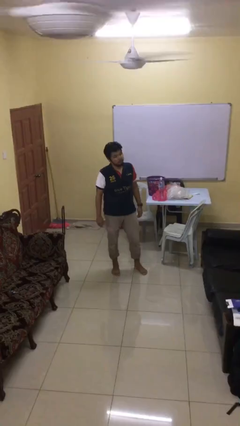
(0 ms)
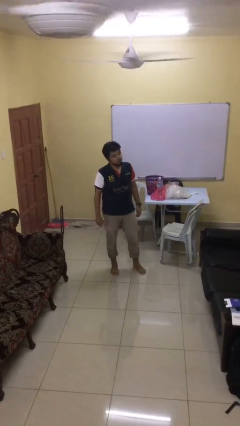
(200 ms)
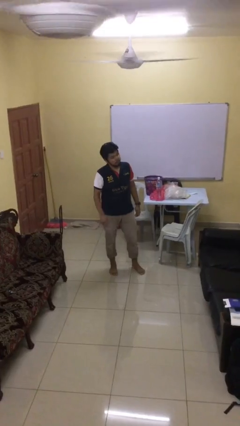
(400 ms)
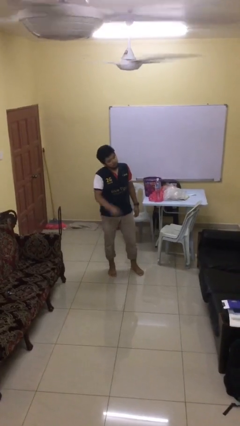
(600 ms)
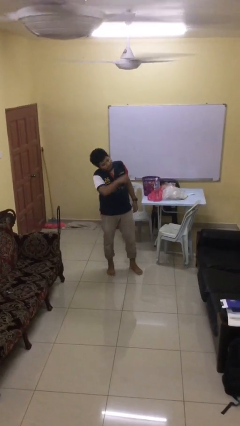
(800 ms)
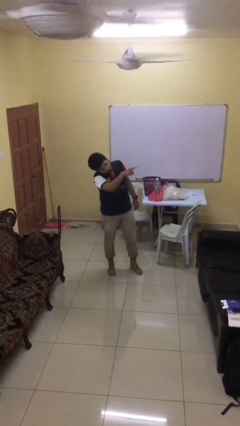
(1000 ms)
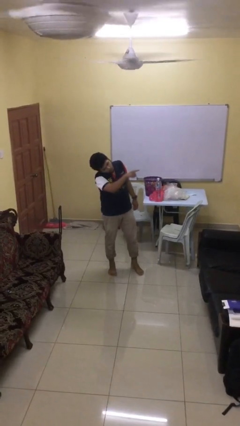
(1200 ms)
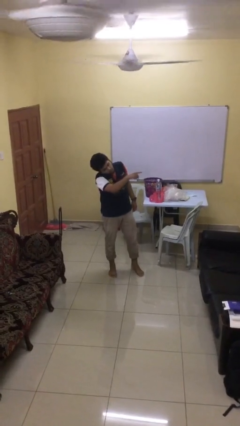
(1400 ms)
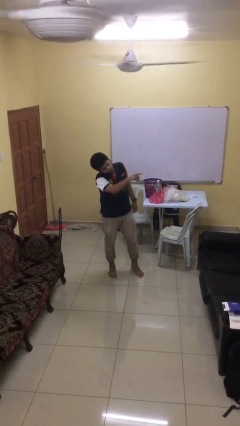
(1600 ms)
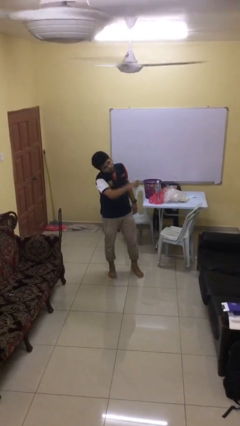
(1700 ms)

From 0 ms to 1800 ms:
person points at person

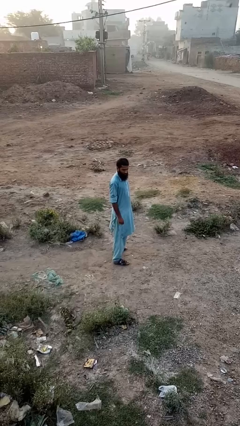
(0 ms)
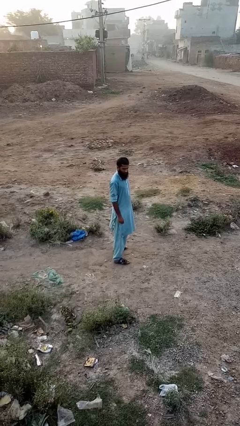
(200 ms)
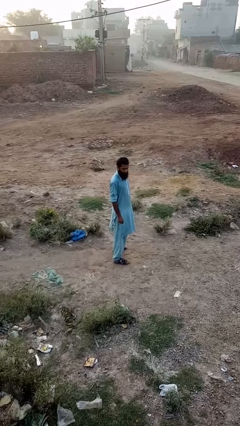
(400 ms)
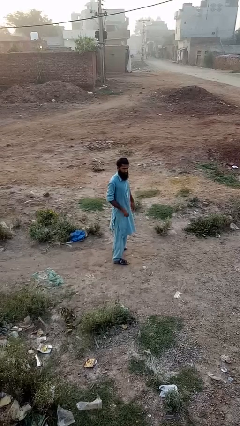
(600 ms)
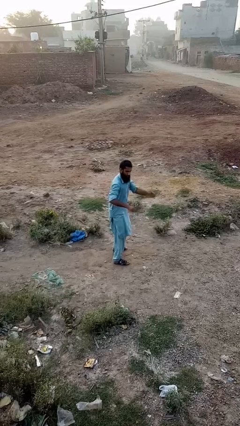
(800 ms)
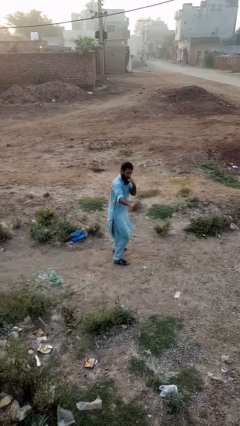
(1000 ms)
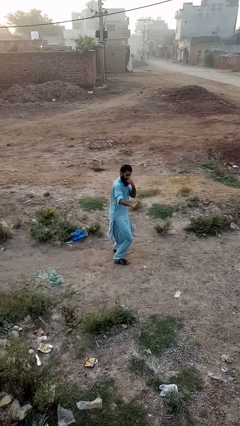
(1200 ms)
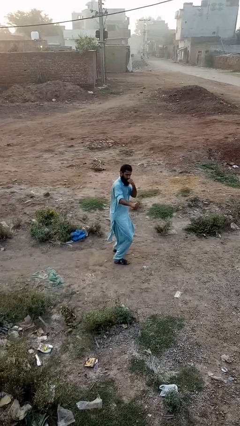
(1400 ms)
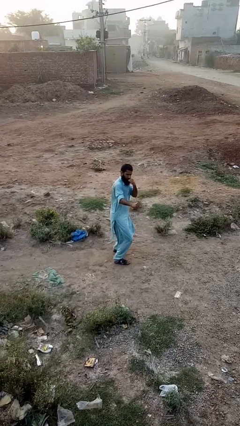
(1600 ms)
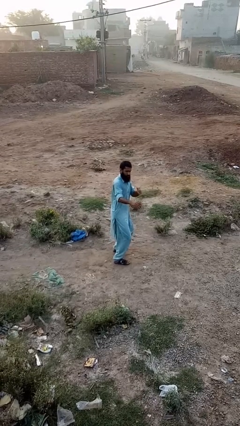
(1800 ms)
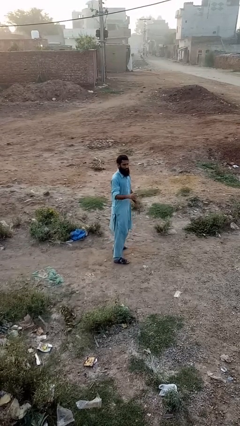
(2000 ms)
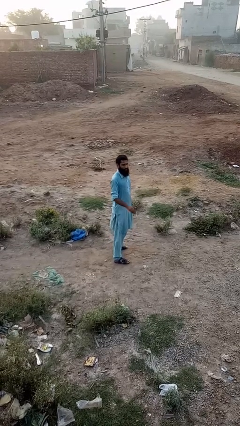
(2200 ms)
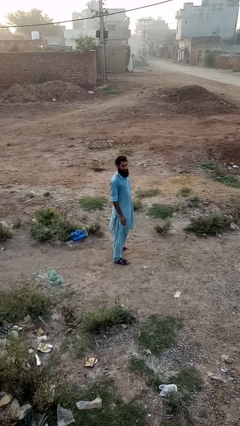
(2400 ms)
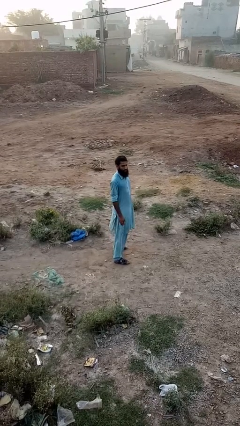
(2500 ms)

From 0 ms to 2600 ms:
person karate chop

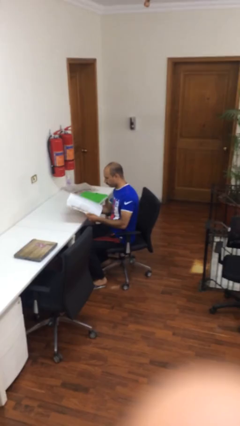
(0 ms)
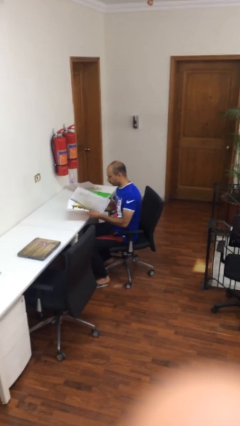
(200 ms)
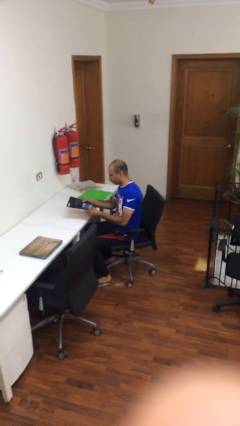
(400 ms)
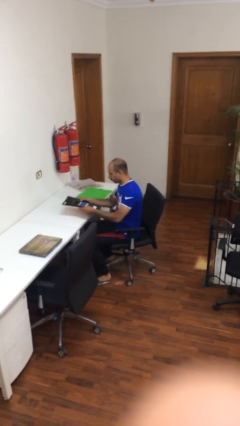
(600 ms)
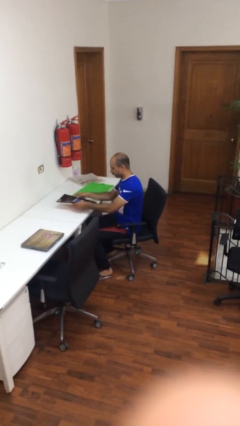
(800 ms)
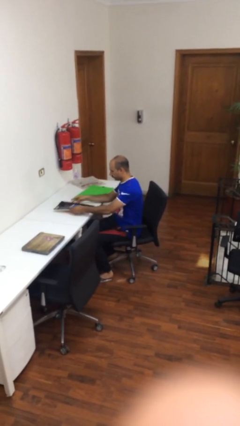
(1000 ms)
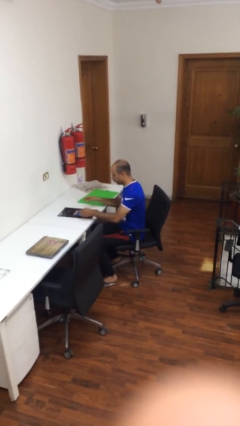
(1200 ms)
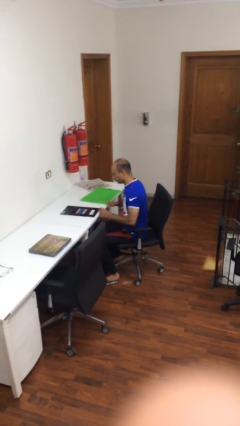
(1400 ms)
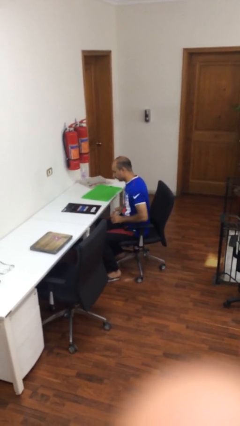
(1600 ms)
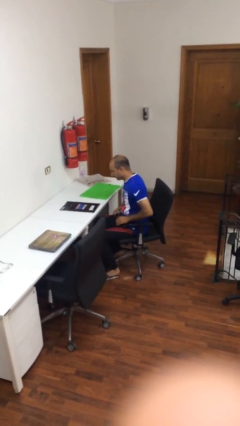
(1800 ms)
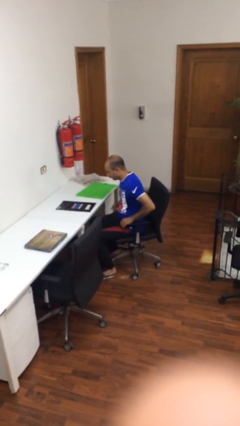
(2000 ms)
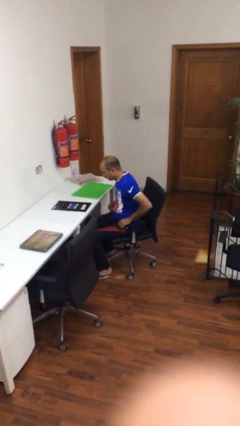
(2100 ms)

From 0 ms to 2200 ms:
person puts down object on table

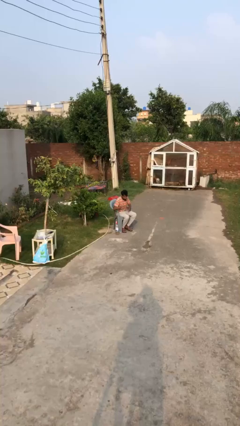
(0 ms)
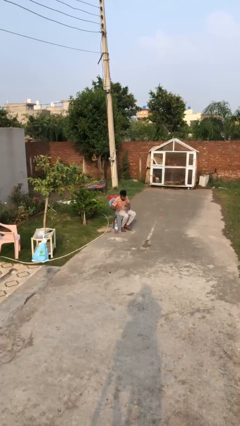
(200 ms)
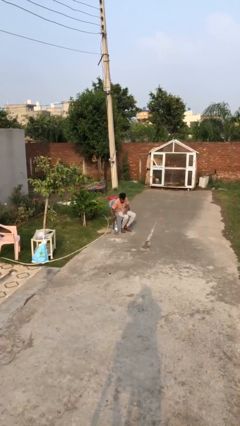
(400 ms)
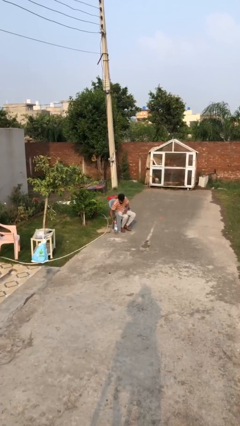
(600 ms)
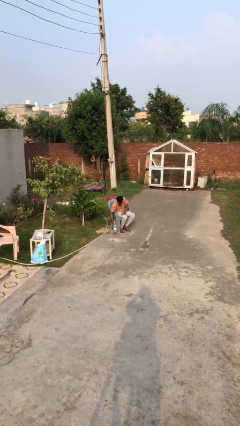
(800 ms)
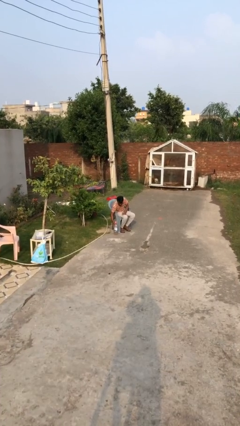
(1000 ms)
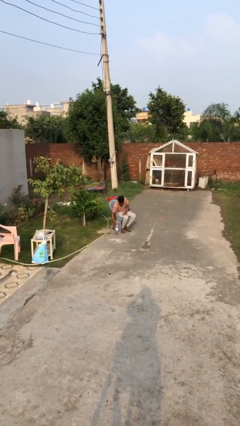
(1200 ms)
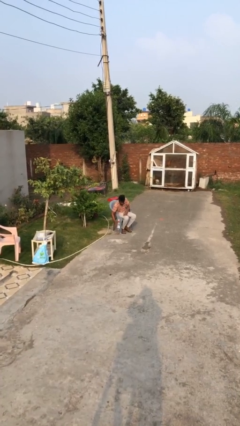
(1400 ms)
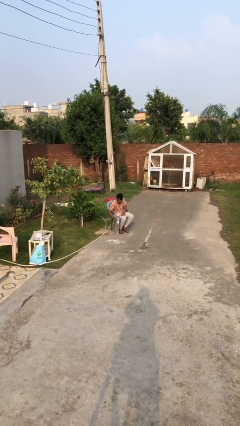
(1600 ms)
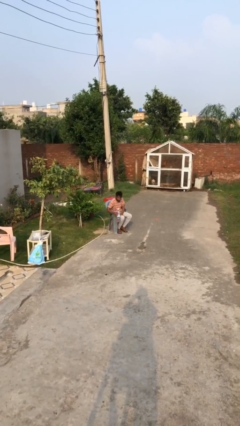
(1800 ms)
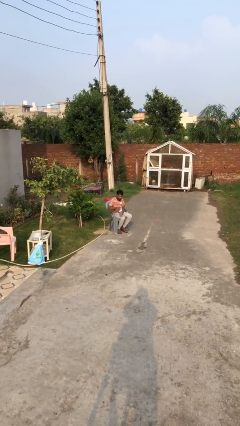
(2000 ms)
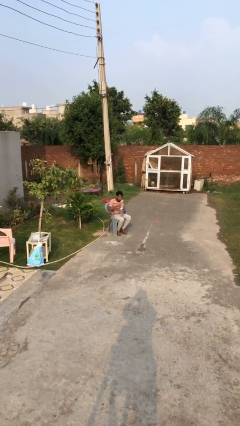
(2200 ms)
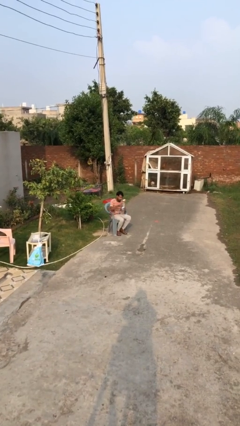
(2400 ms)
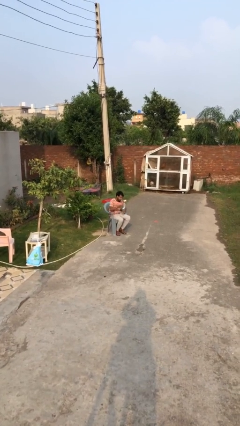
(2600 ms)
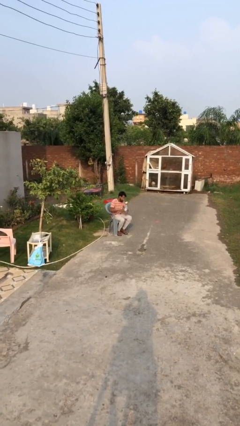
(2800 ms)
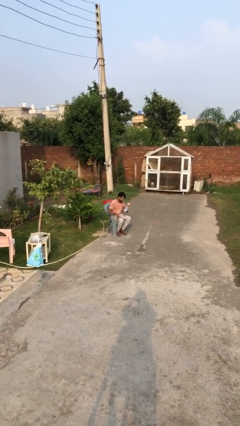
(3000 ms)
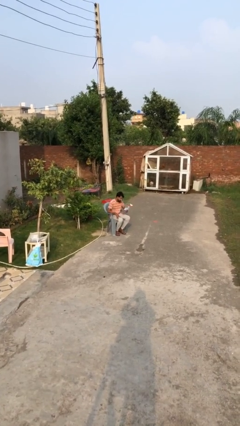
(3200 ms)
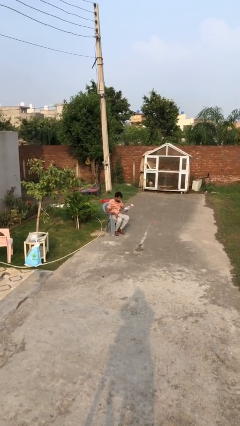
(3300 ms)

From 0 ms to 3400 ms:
person picks up object from floor

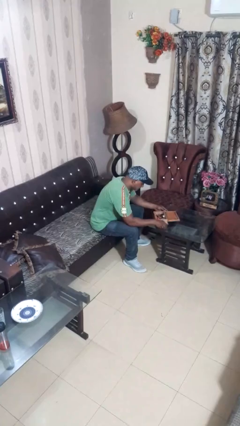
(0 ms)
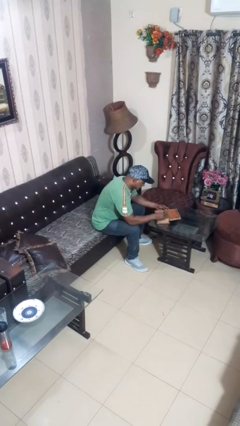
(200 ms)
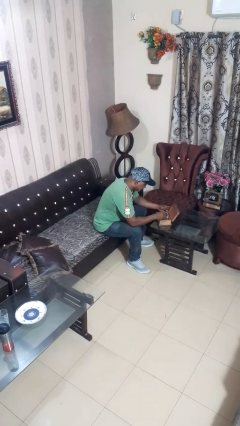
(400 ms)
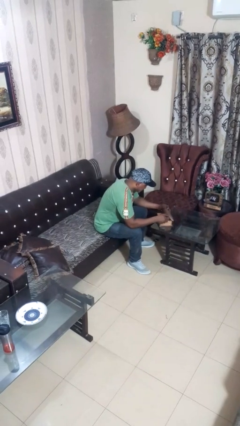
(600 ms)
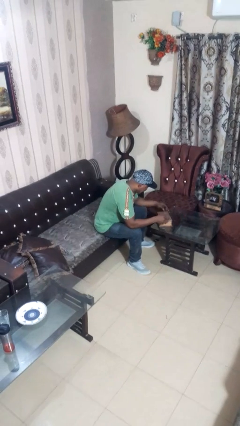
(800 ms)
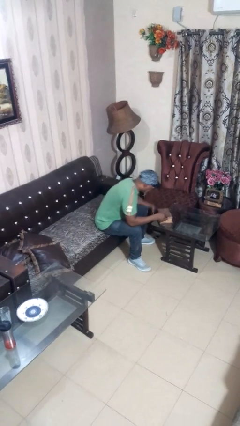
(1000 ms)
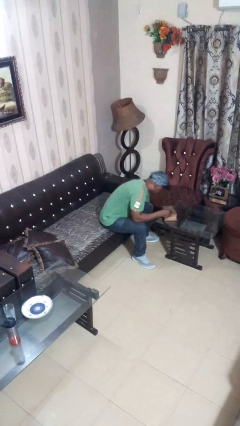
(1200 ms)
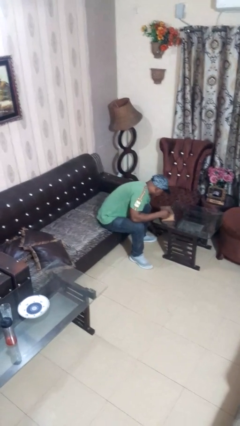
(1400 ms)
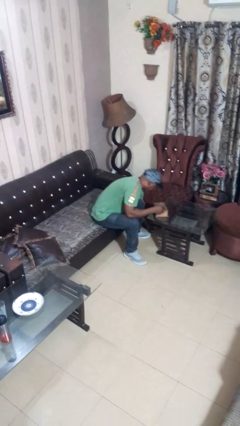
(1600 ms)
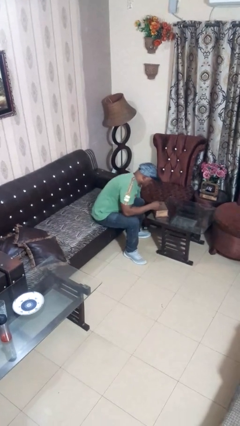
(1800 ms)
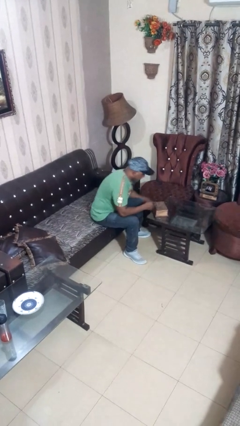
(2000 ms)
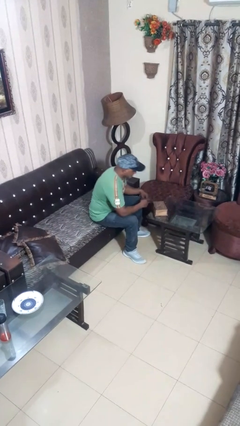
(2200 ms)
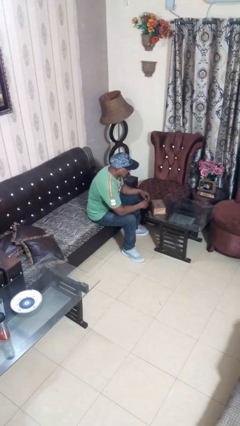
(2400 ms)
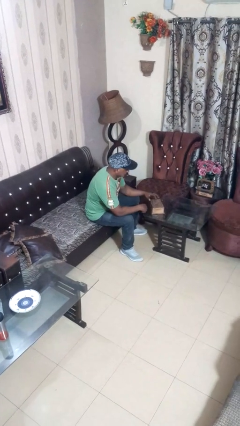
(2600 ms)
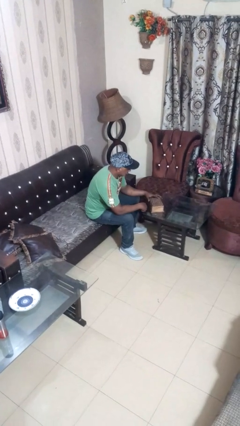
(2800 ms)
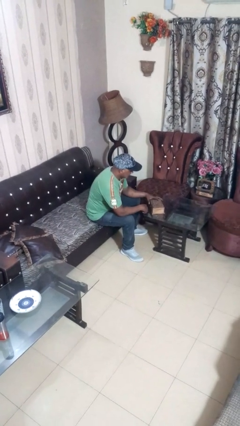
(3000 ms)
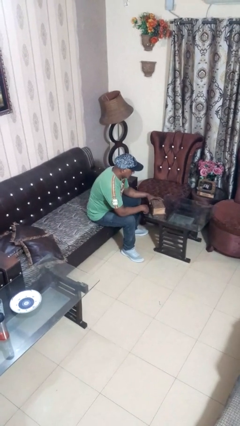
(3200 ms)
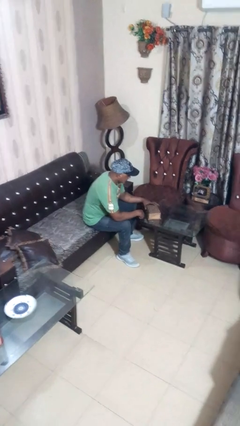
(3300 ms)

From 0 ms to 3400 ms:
person closes jewelry box

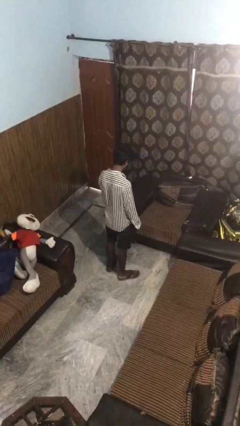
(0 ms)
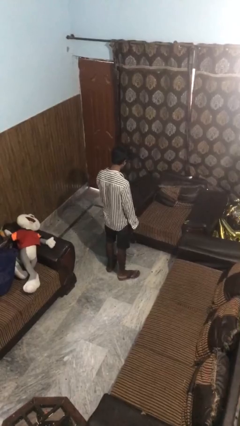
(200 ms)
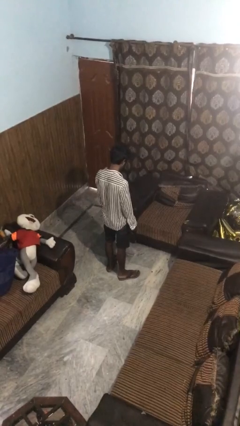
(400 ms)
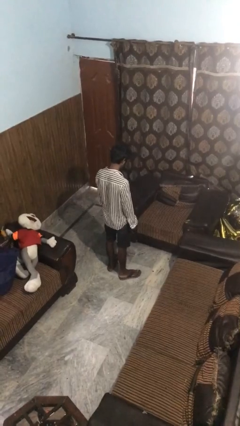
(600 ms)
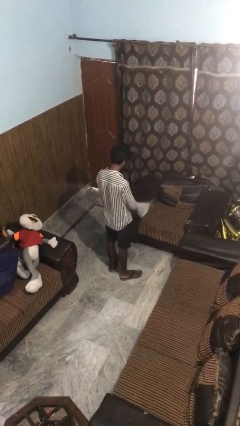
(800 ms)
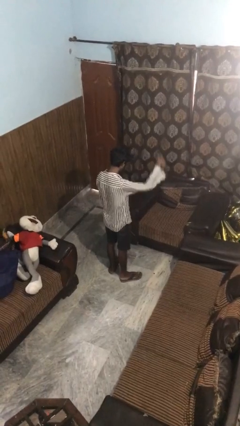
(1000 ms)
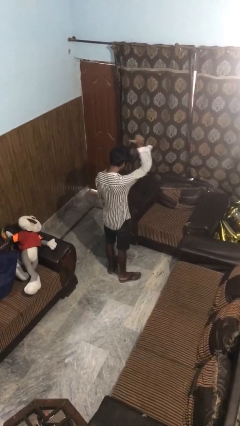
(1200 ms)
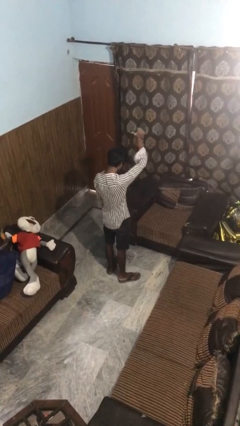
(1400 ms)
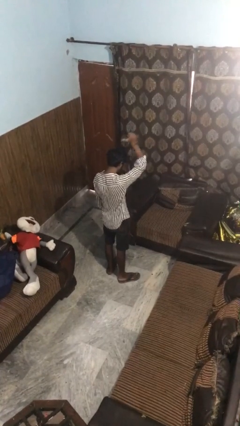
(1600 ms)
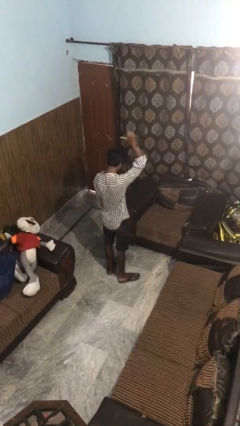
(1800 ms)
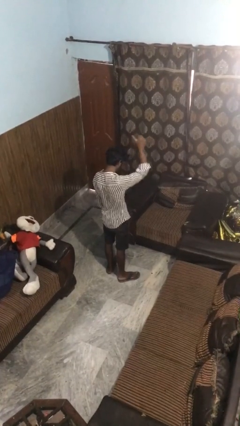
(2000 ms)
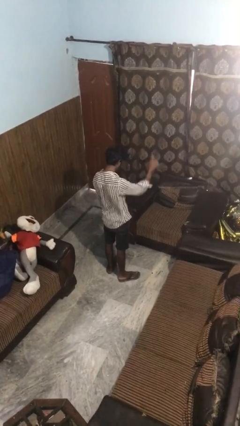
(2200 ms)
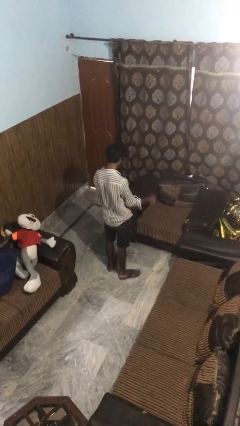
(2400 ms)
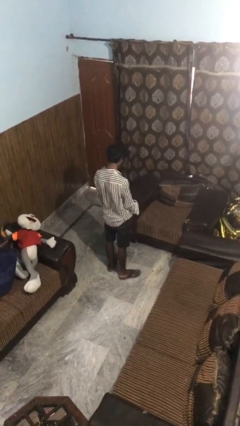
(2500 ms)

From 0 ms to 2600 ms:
person gestures behind me

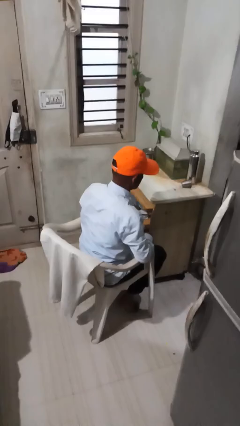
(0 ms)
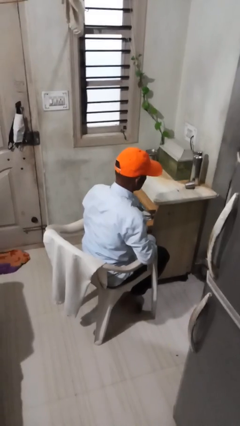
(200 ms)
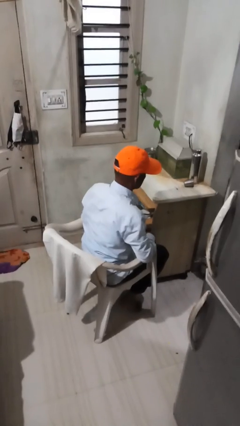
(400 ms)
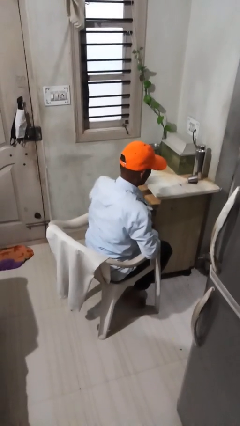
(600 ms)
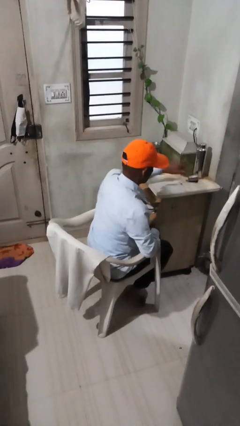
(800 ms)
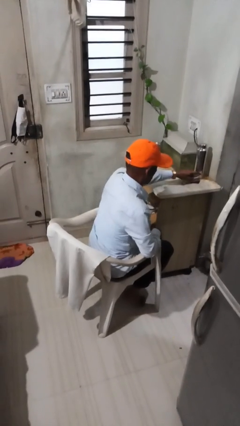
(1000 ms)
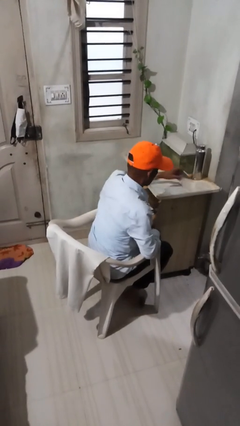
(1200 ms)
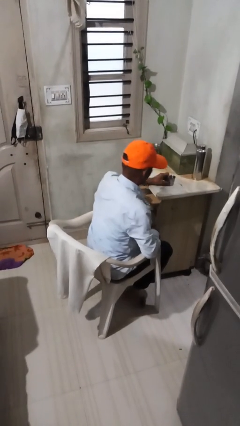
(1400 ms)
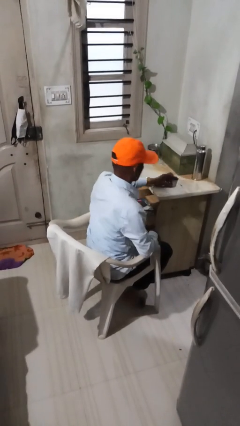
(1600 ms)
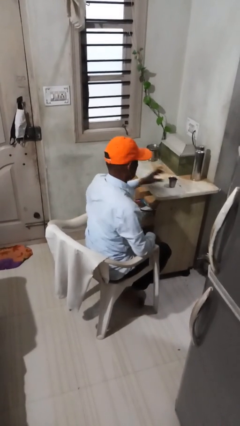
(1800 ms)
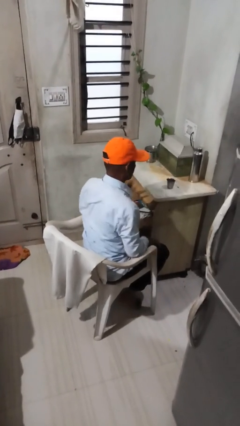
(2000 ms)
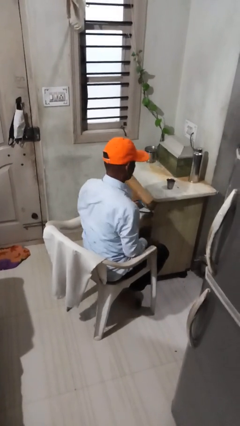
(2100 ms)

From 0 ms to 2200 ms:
person sets upright glass
